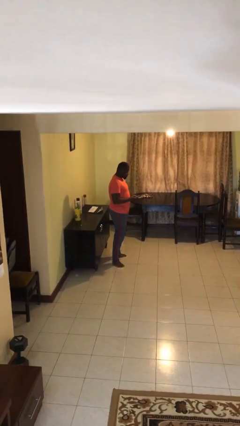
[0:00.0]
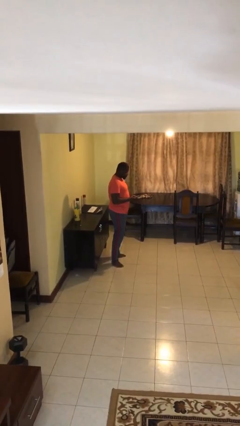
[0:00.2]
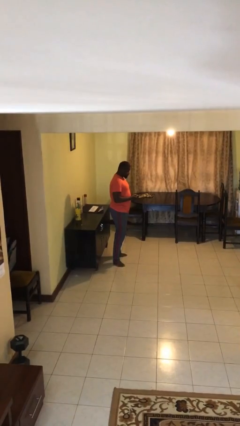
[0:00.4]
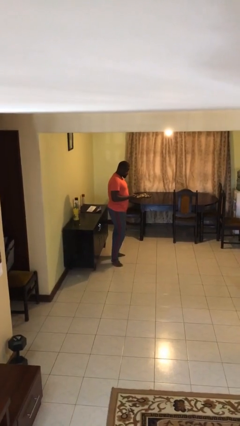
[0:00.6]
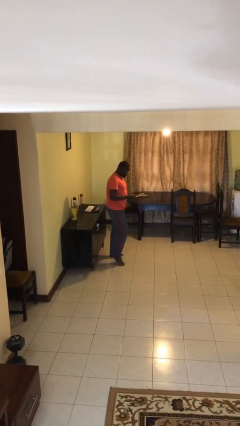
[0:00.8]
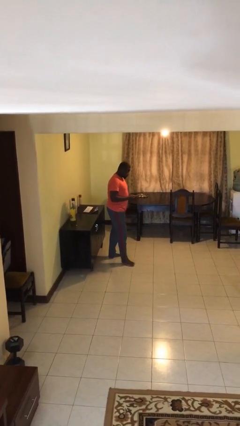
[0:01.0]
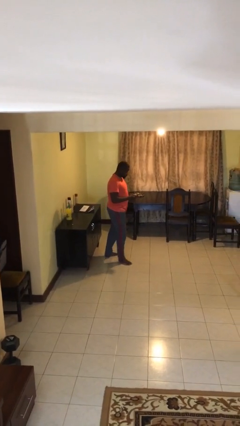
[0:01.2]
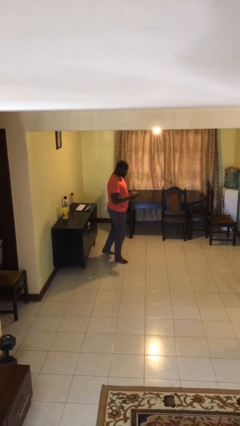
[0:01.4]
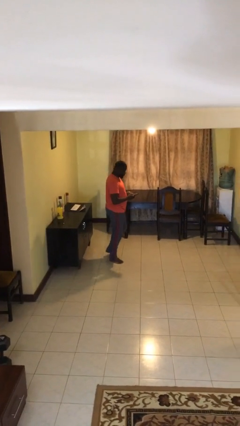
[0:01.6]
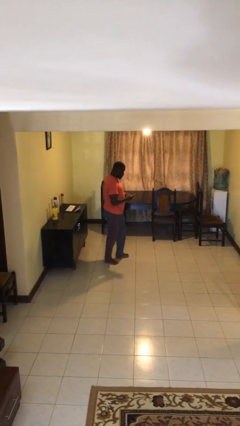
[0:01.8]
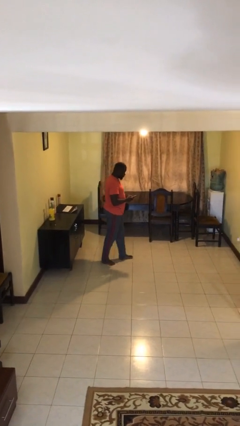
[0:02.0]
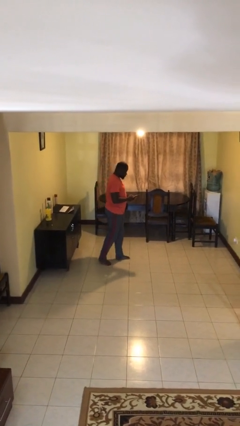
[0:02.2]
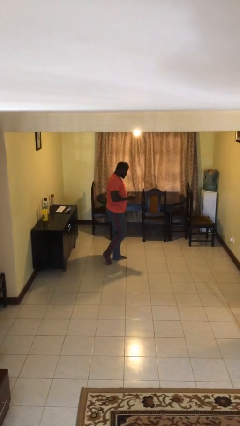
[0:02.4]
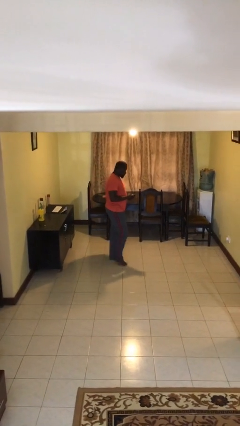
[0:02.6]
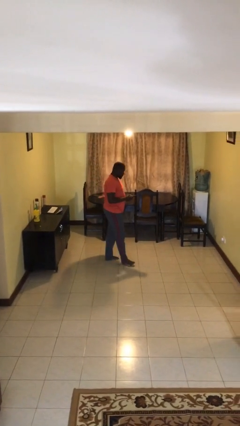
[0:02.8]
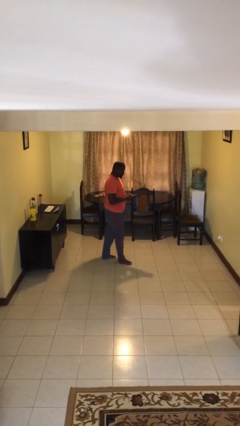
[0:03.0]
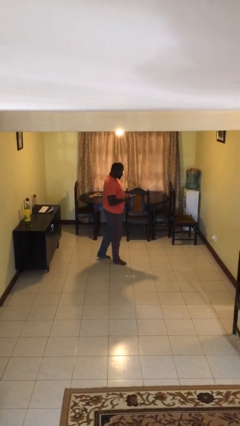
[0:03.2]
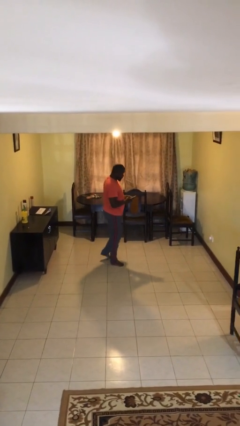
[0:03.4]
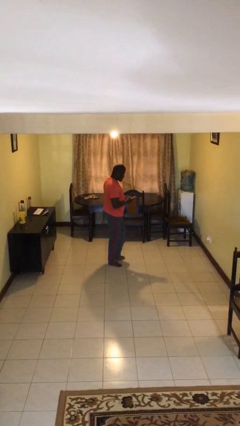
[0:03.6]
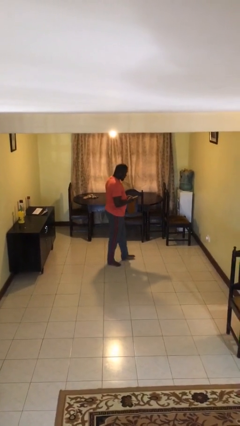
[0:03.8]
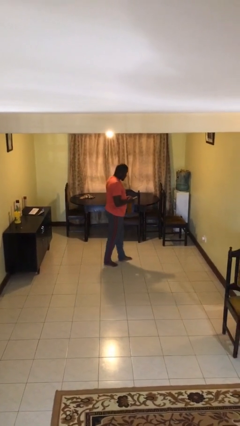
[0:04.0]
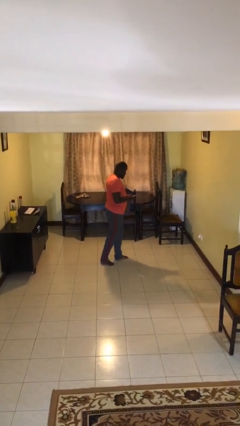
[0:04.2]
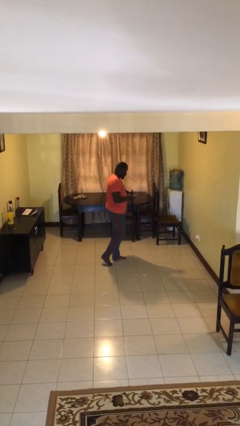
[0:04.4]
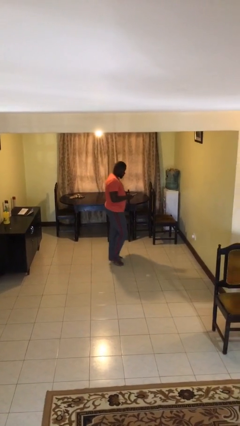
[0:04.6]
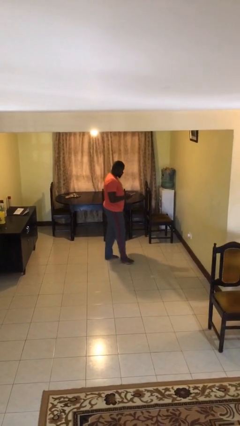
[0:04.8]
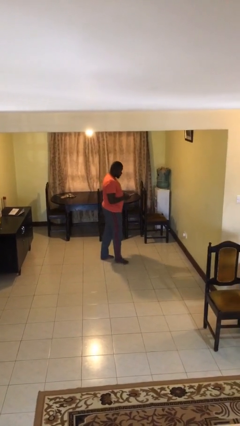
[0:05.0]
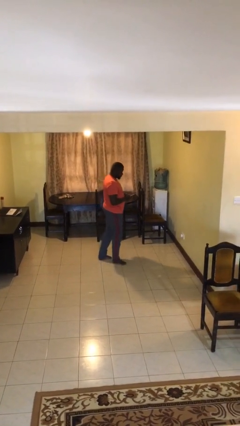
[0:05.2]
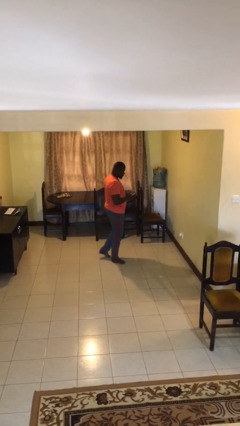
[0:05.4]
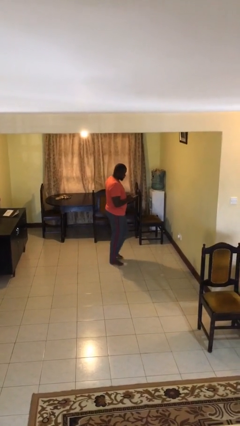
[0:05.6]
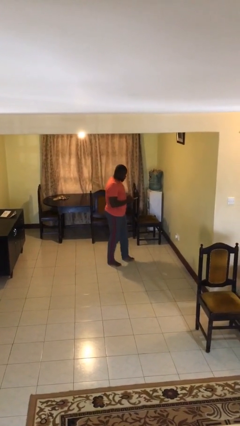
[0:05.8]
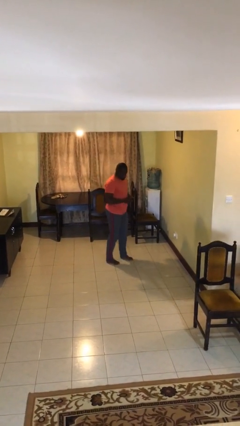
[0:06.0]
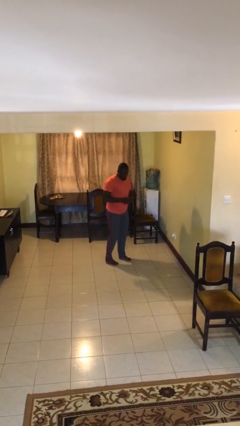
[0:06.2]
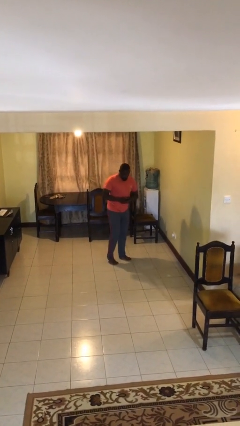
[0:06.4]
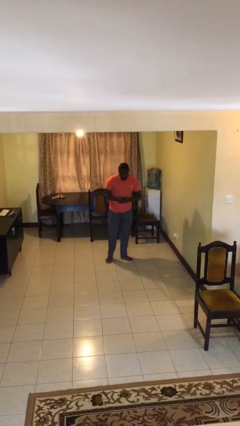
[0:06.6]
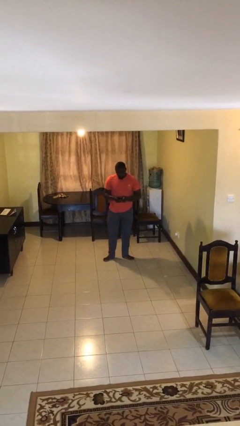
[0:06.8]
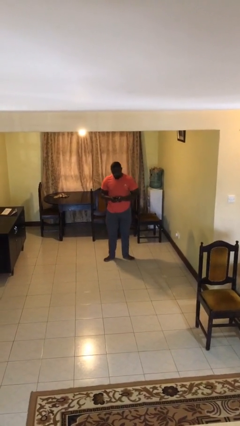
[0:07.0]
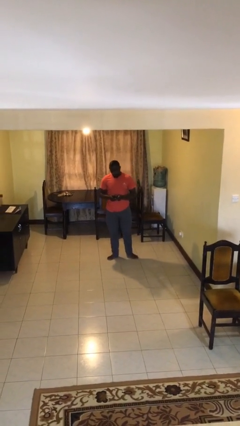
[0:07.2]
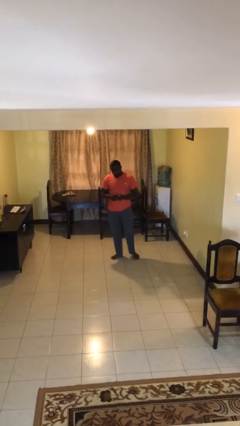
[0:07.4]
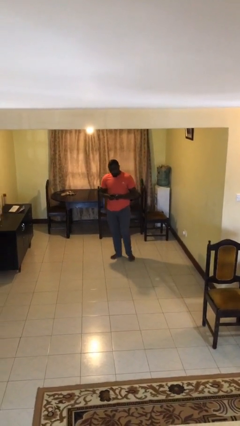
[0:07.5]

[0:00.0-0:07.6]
person texts on phone

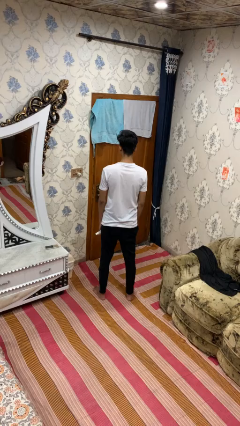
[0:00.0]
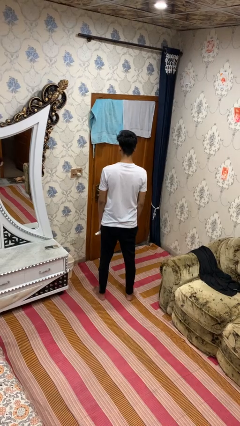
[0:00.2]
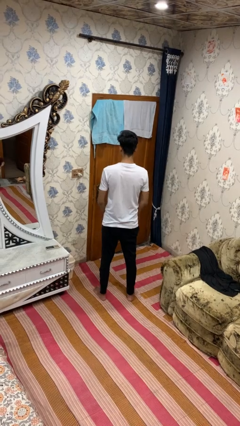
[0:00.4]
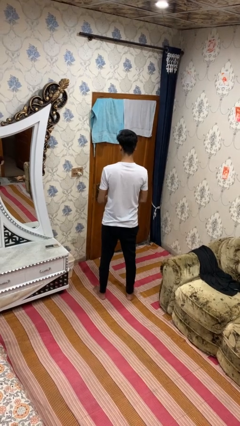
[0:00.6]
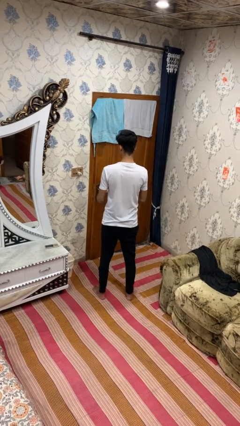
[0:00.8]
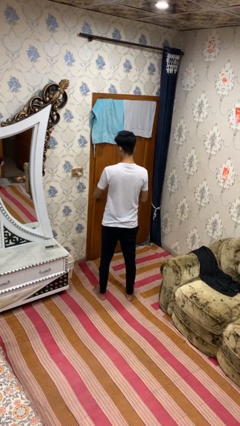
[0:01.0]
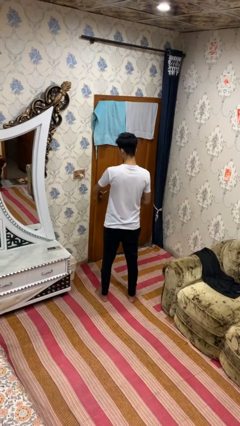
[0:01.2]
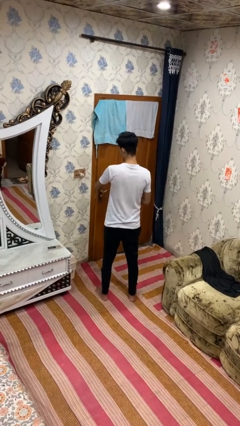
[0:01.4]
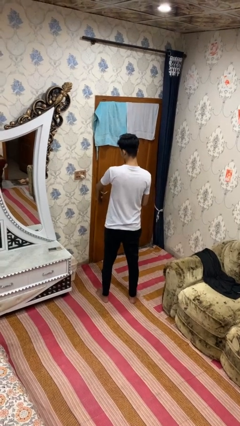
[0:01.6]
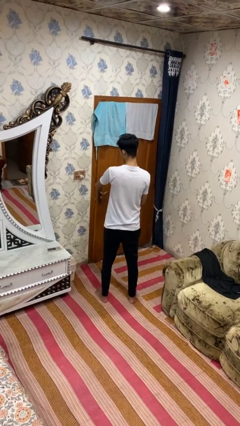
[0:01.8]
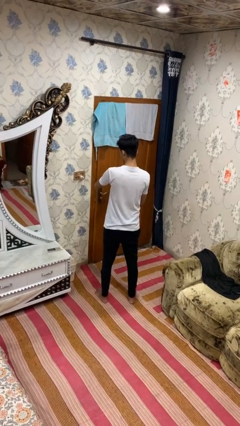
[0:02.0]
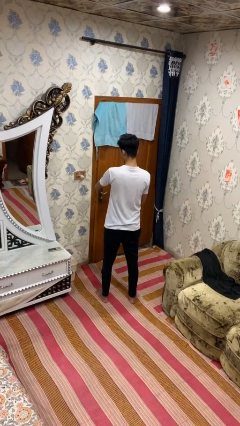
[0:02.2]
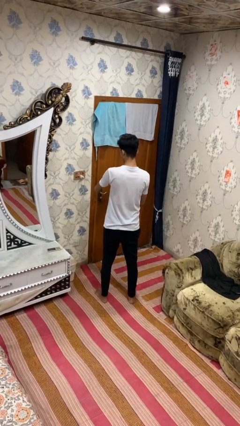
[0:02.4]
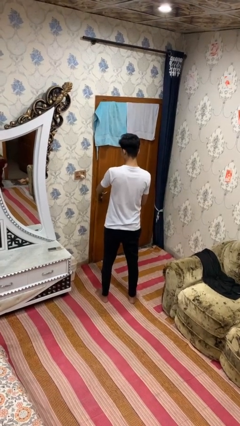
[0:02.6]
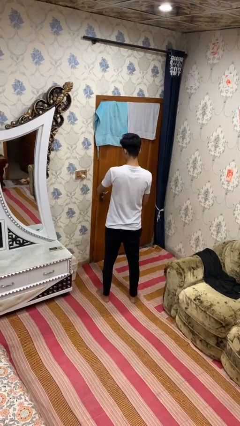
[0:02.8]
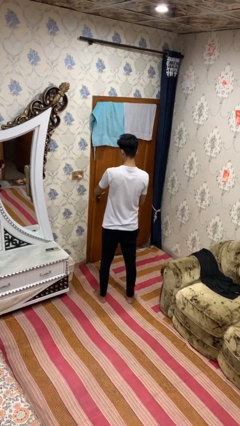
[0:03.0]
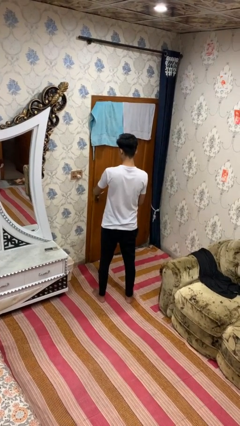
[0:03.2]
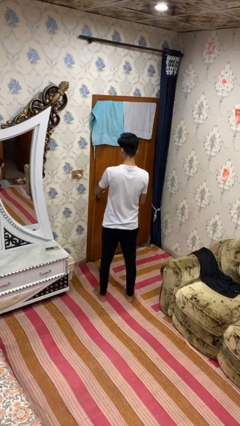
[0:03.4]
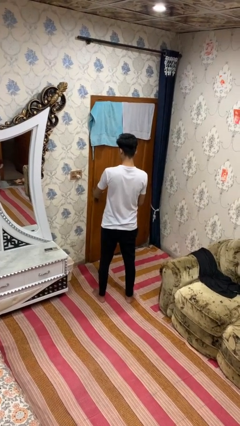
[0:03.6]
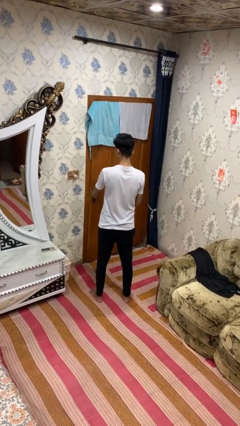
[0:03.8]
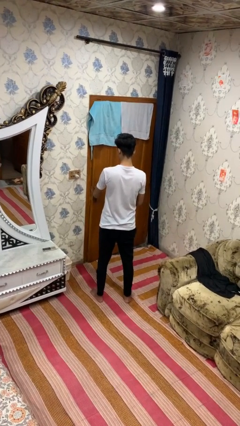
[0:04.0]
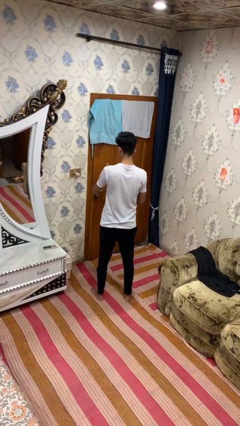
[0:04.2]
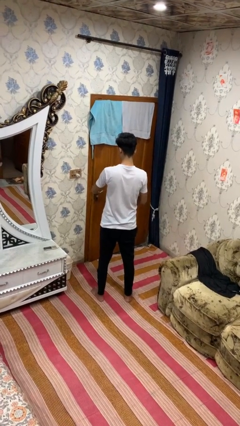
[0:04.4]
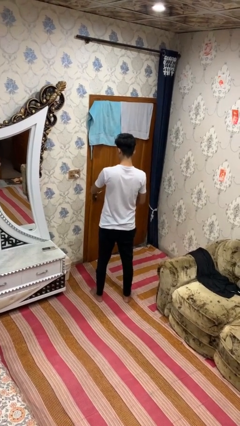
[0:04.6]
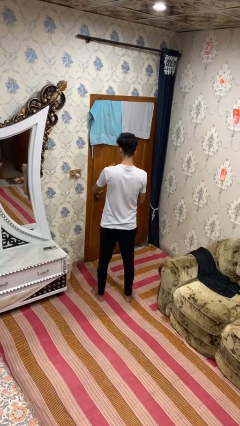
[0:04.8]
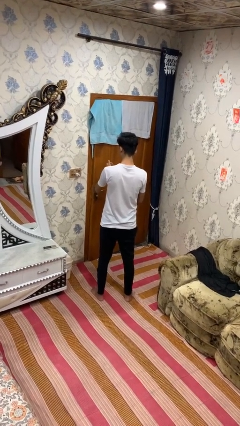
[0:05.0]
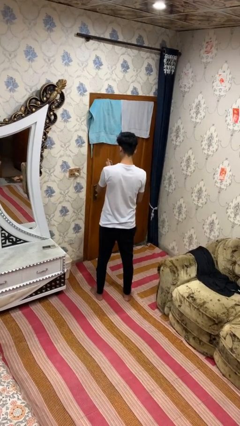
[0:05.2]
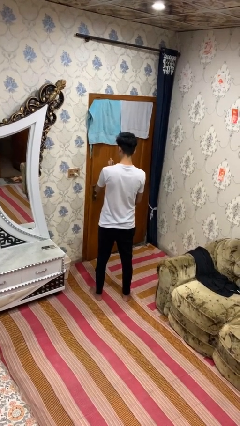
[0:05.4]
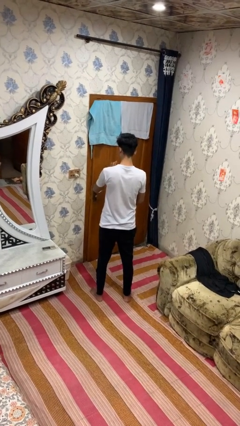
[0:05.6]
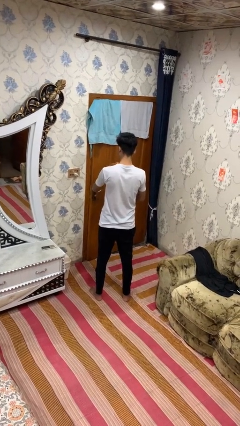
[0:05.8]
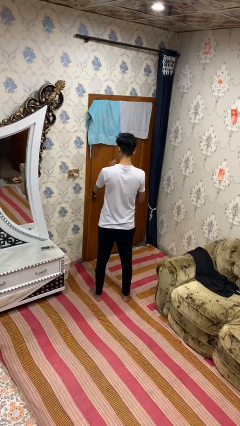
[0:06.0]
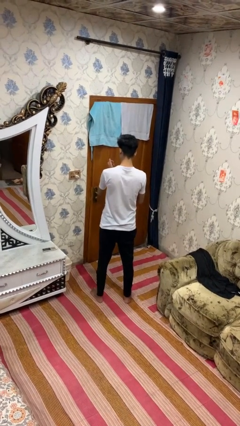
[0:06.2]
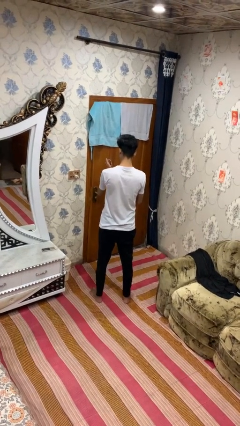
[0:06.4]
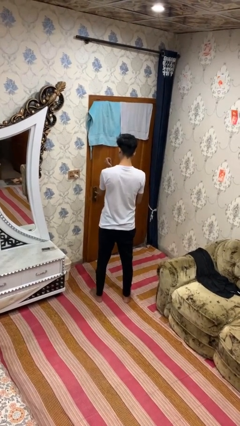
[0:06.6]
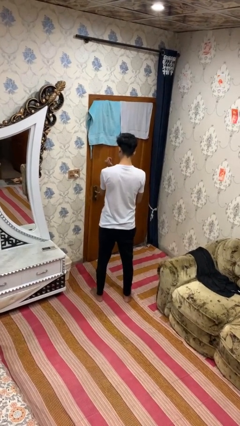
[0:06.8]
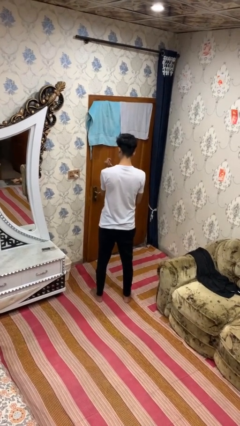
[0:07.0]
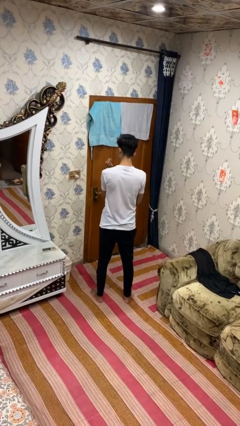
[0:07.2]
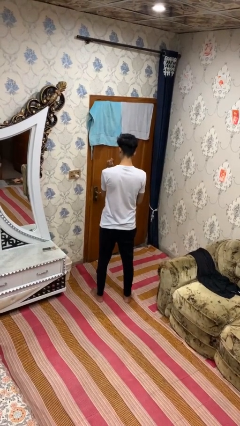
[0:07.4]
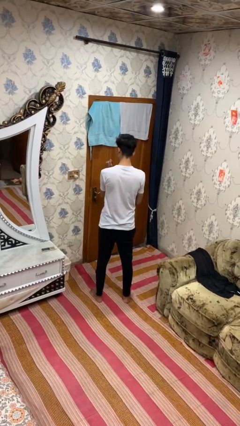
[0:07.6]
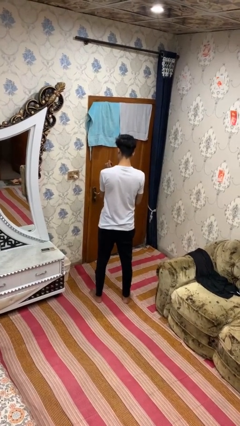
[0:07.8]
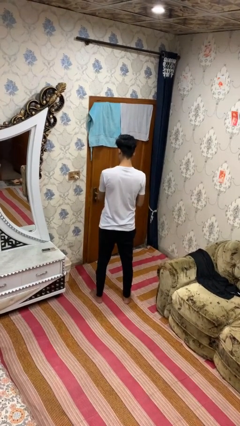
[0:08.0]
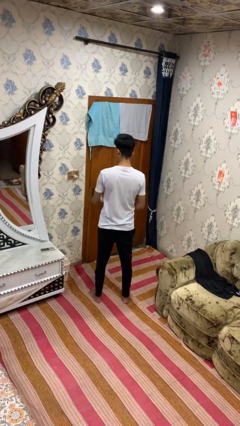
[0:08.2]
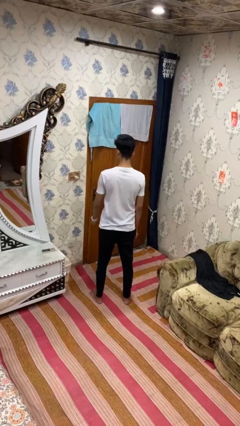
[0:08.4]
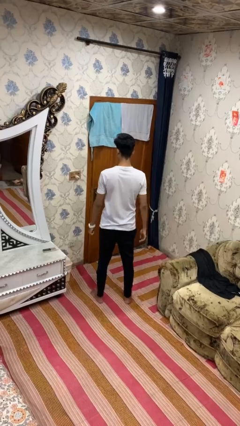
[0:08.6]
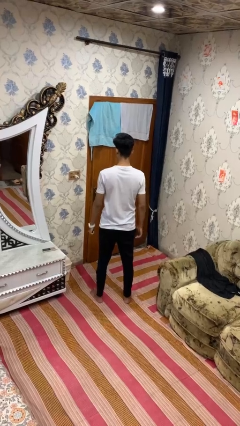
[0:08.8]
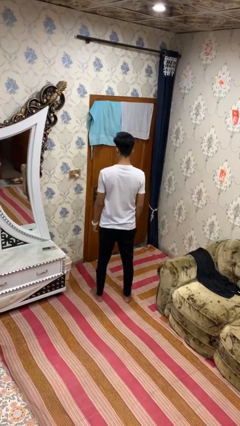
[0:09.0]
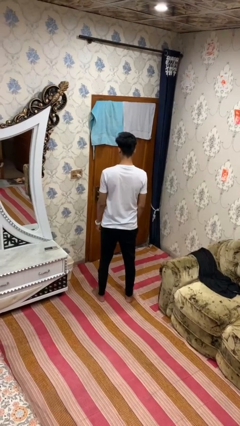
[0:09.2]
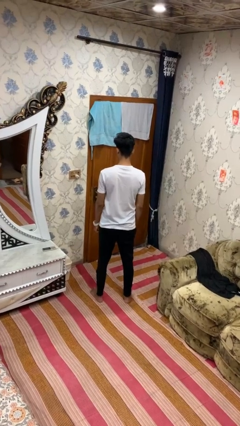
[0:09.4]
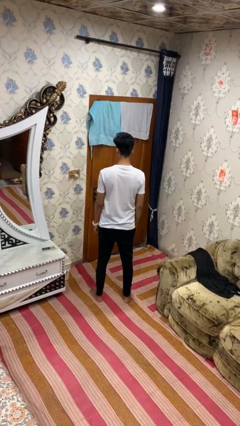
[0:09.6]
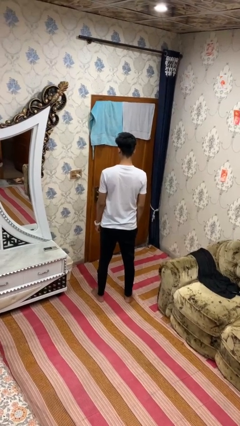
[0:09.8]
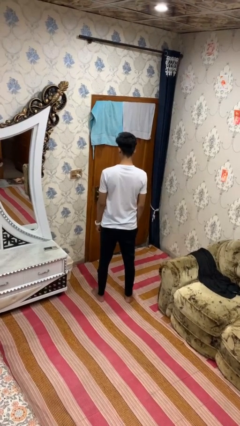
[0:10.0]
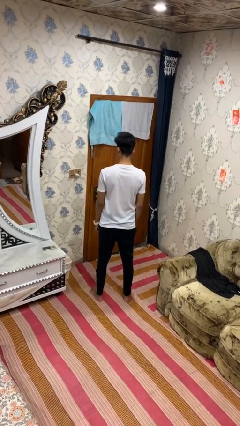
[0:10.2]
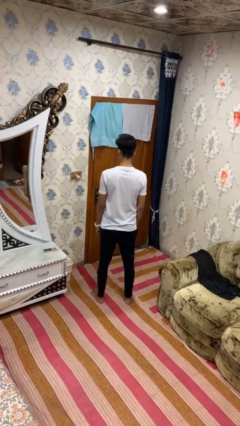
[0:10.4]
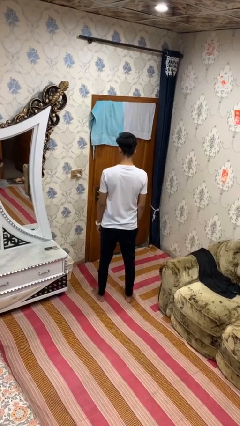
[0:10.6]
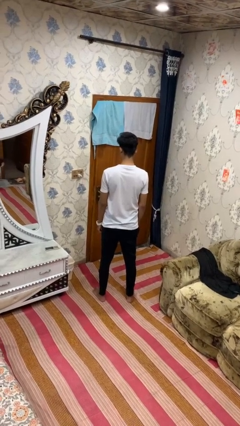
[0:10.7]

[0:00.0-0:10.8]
person puts on wristwatch
